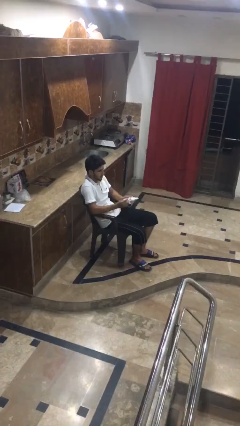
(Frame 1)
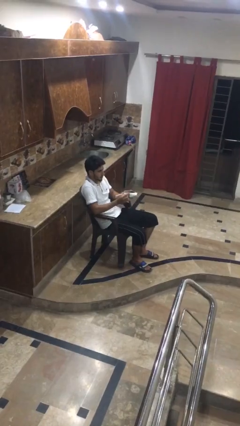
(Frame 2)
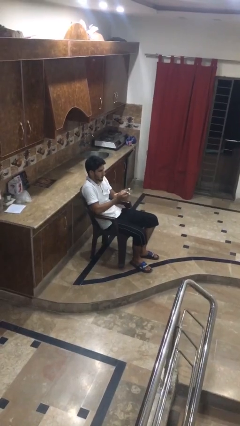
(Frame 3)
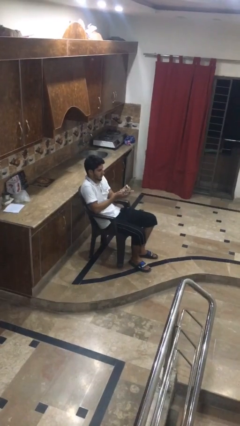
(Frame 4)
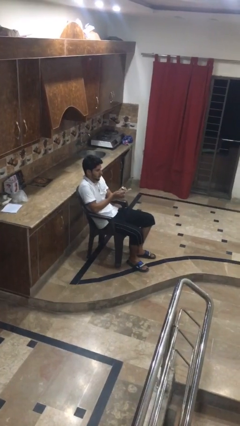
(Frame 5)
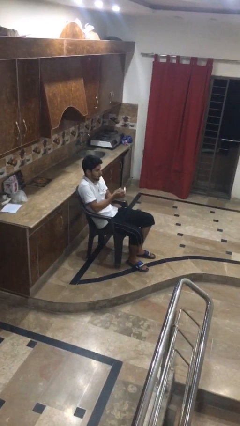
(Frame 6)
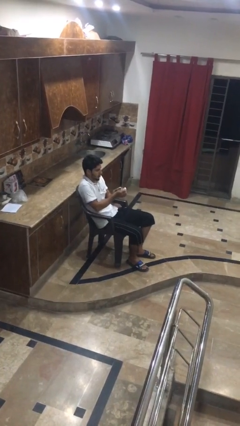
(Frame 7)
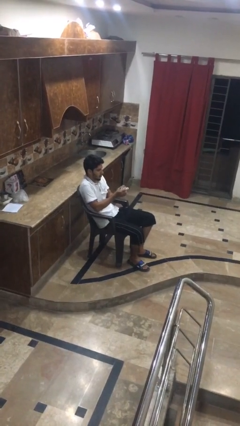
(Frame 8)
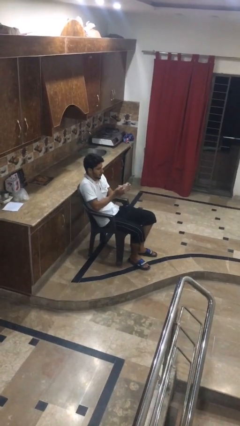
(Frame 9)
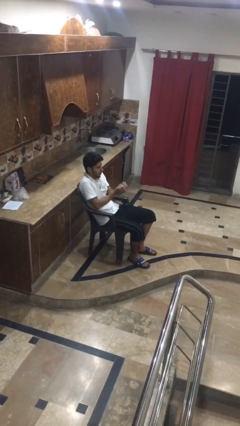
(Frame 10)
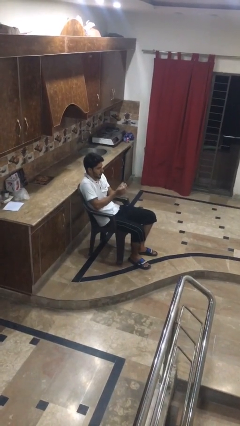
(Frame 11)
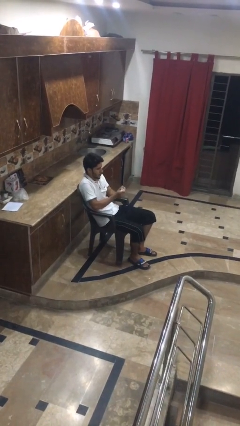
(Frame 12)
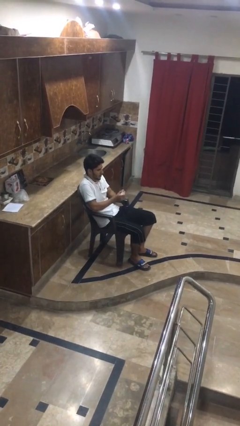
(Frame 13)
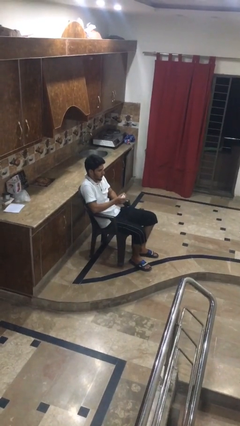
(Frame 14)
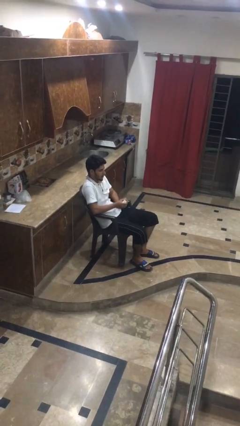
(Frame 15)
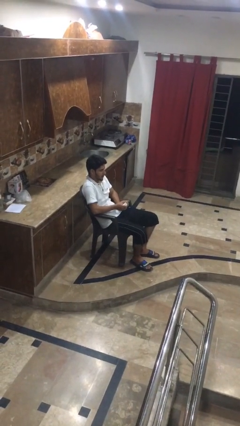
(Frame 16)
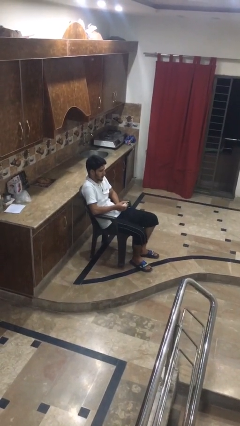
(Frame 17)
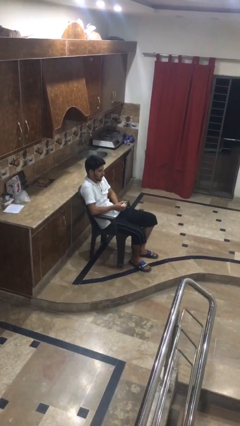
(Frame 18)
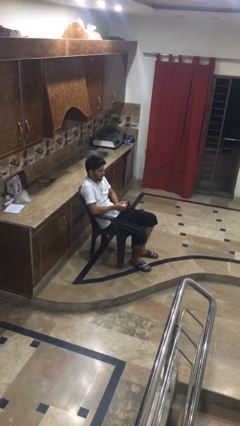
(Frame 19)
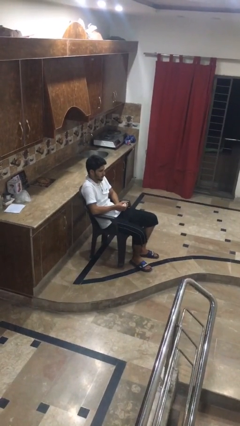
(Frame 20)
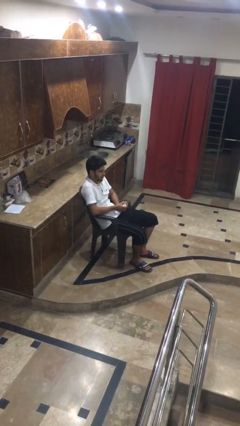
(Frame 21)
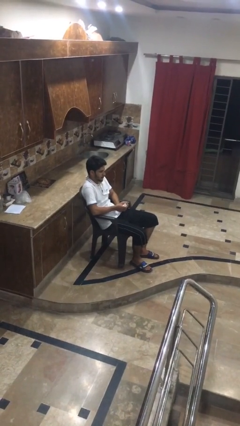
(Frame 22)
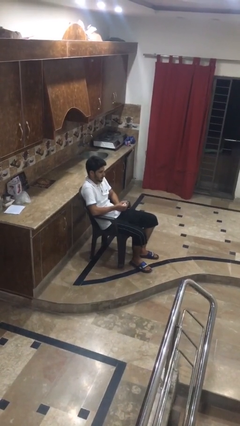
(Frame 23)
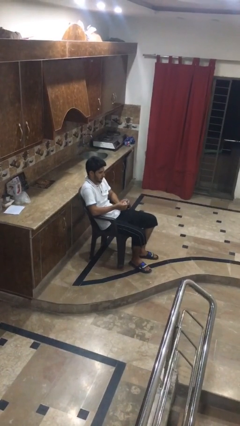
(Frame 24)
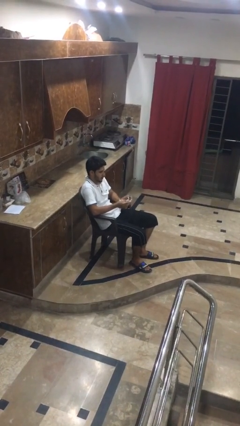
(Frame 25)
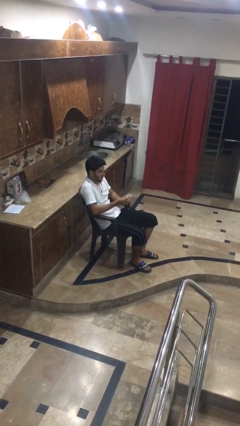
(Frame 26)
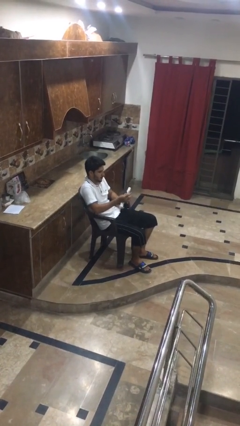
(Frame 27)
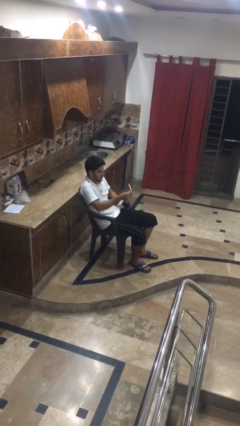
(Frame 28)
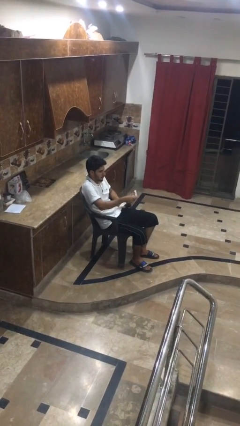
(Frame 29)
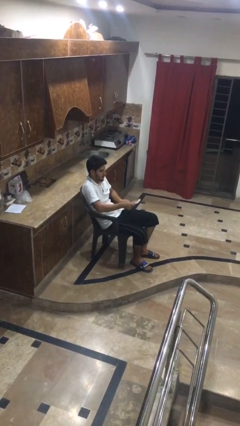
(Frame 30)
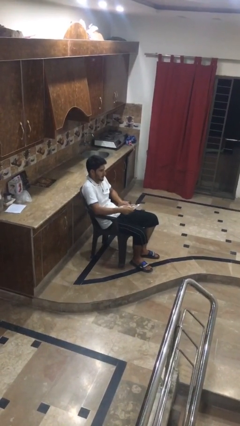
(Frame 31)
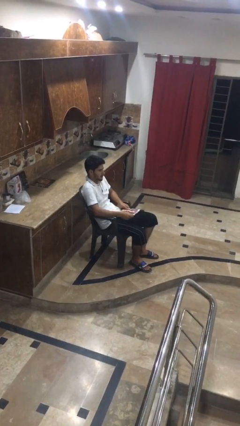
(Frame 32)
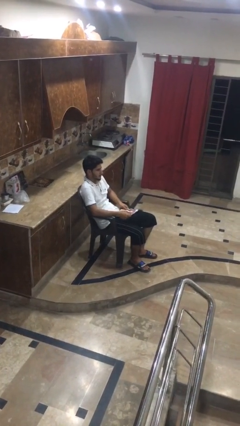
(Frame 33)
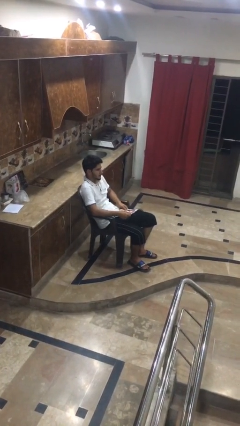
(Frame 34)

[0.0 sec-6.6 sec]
person crumples paper

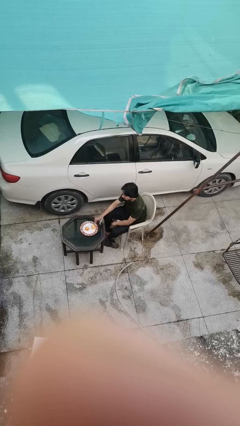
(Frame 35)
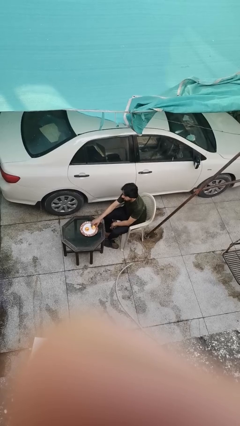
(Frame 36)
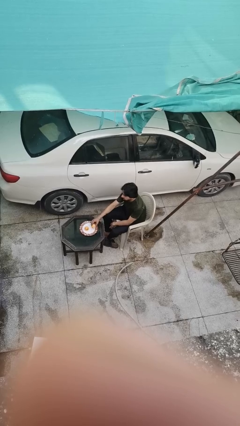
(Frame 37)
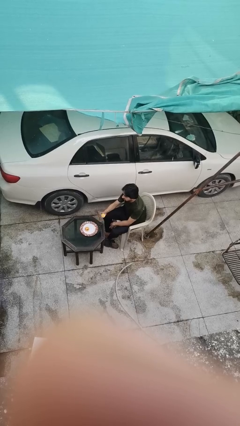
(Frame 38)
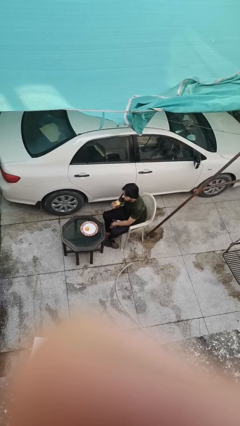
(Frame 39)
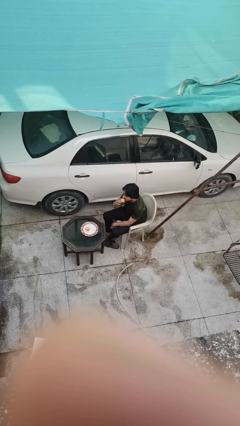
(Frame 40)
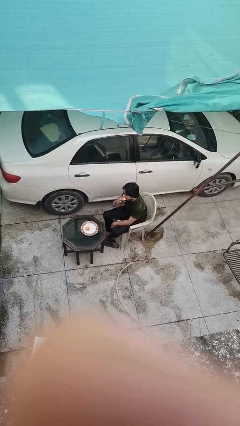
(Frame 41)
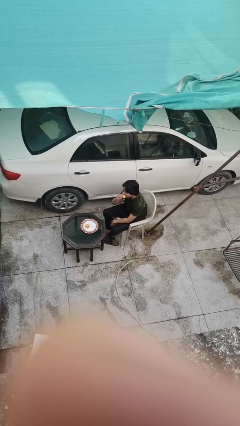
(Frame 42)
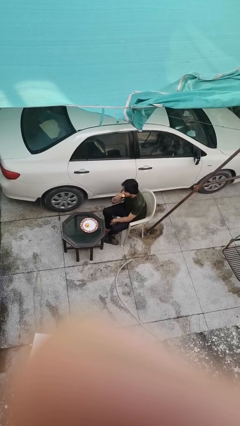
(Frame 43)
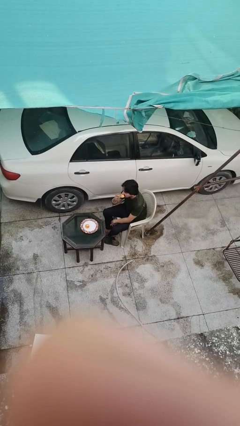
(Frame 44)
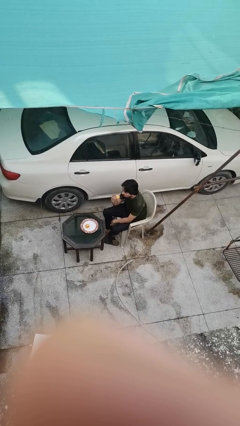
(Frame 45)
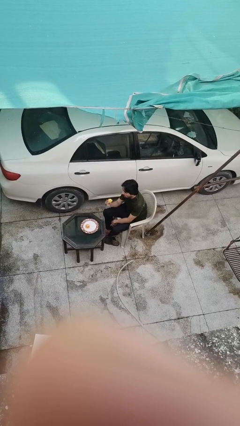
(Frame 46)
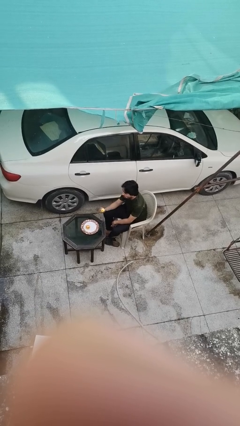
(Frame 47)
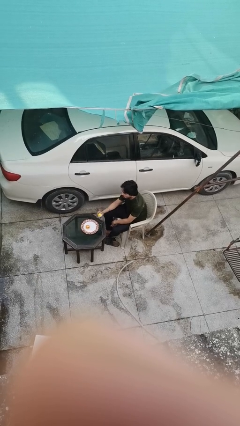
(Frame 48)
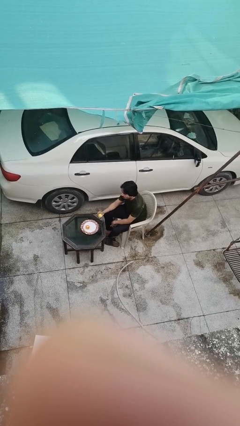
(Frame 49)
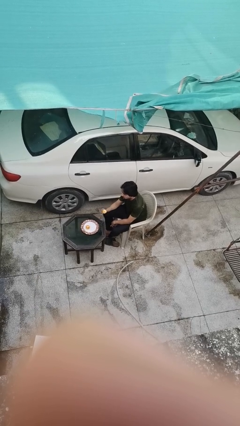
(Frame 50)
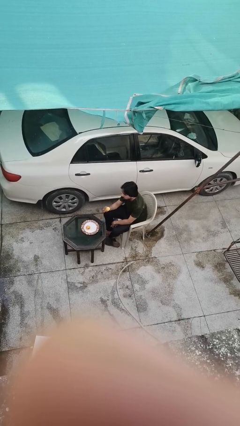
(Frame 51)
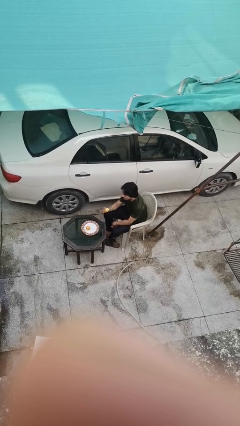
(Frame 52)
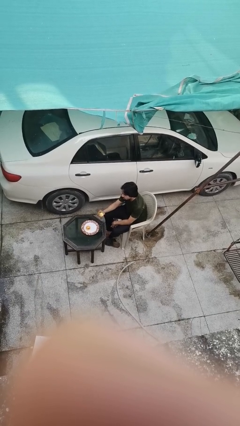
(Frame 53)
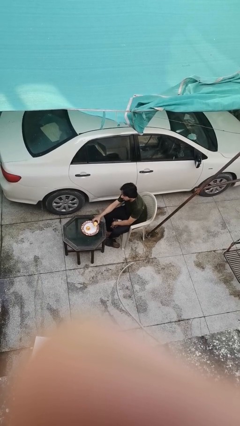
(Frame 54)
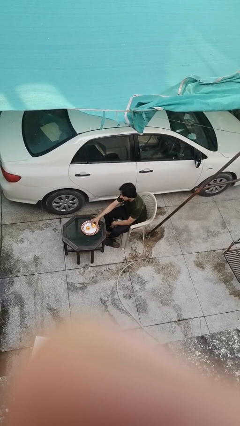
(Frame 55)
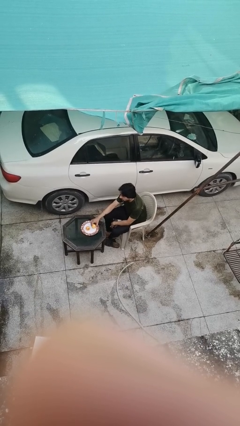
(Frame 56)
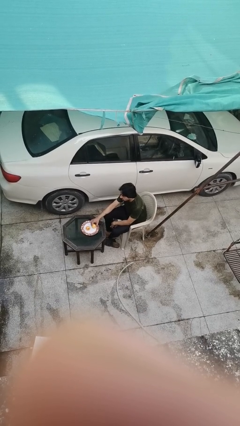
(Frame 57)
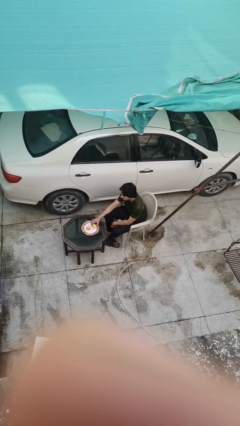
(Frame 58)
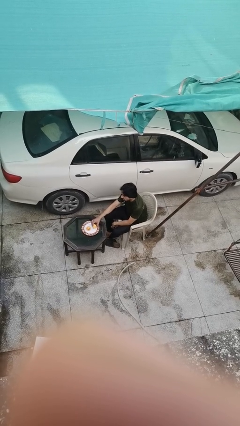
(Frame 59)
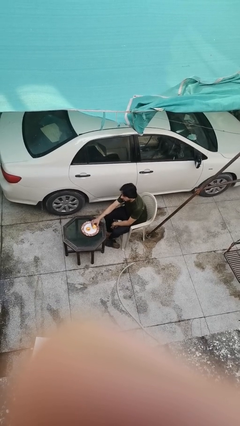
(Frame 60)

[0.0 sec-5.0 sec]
person eats with hands

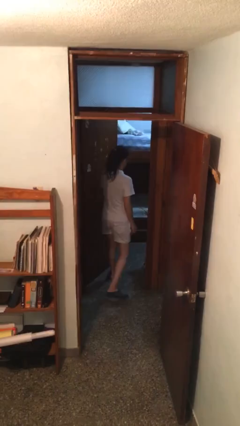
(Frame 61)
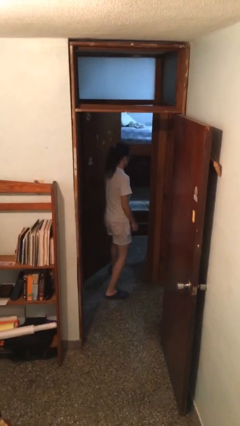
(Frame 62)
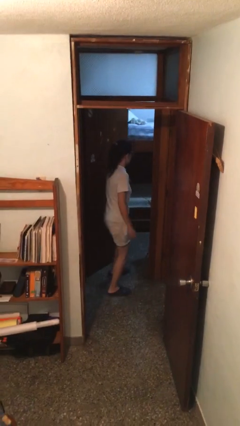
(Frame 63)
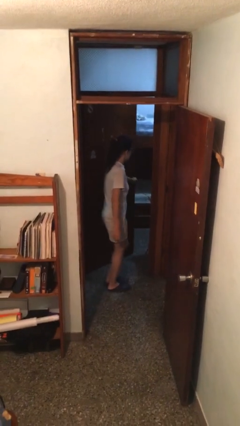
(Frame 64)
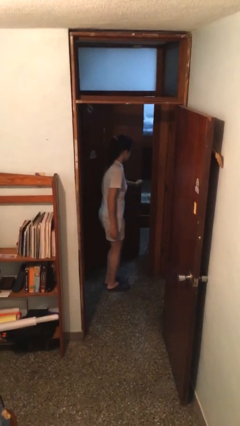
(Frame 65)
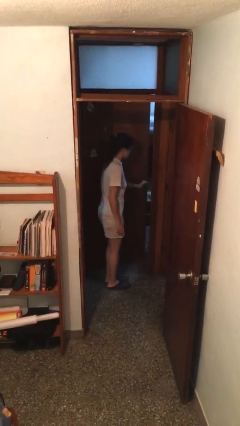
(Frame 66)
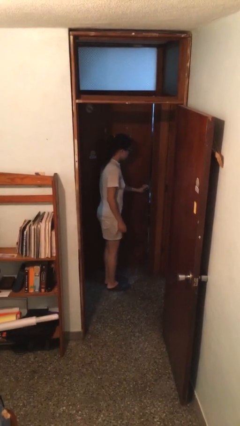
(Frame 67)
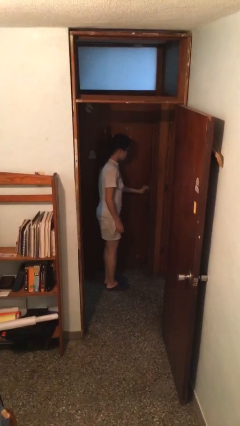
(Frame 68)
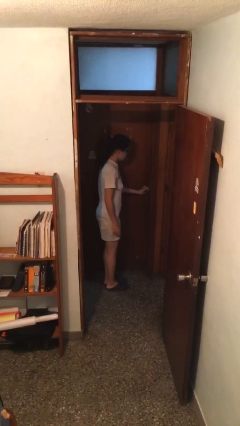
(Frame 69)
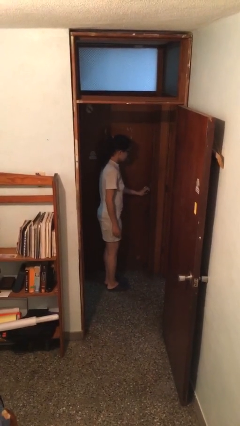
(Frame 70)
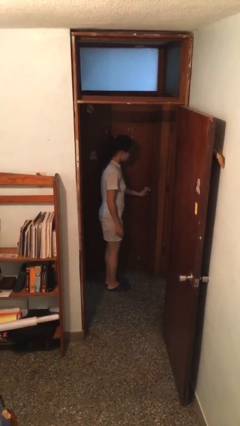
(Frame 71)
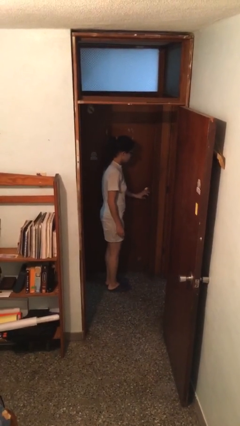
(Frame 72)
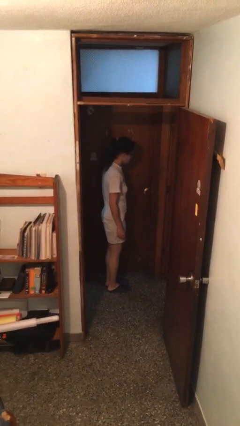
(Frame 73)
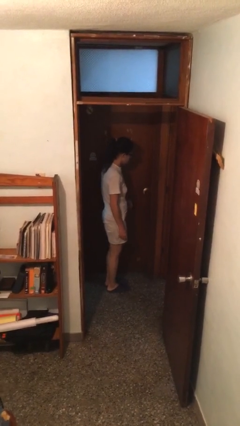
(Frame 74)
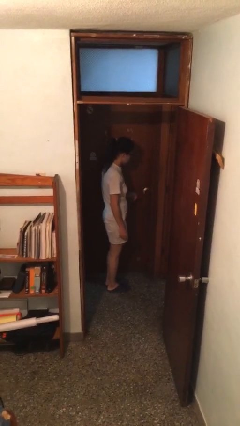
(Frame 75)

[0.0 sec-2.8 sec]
person closes facility door

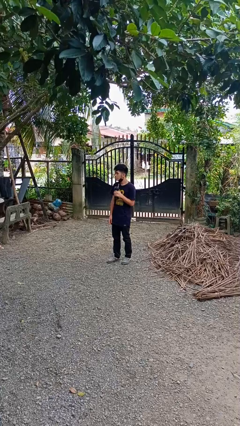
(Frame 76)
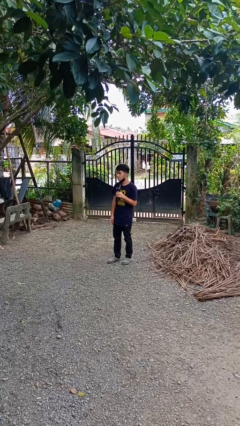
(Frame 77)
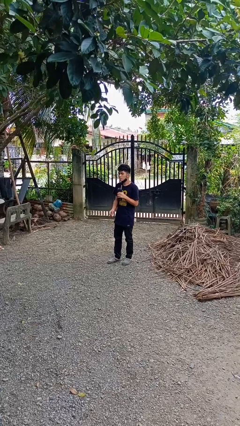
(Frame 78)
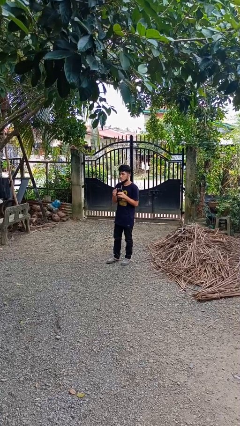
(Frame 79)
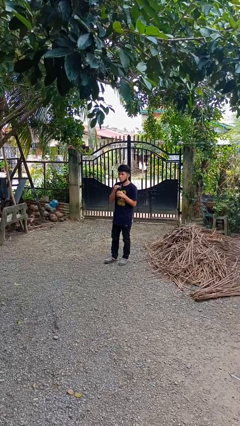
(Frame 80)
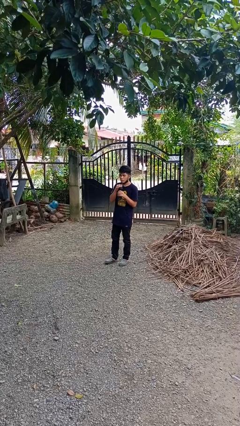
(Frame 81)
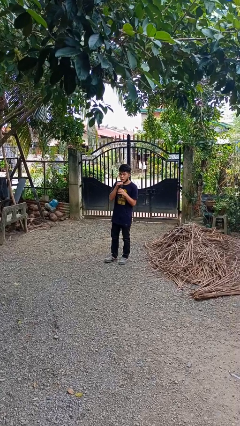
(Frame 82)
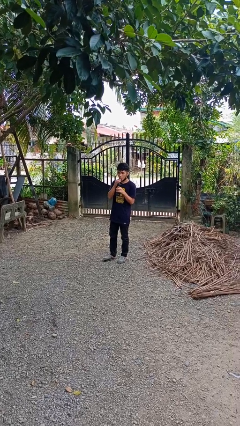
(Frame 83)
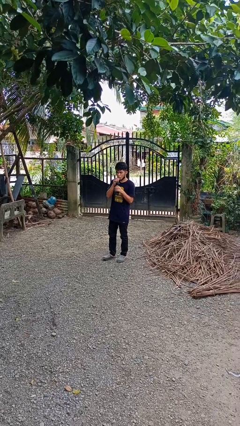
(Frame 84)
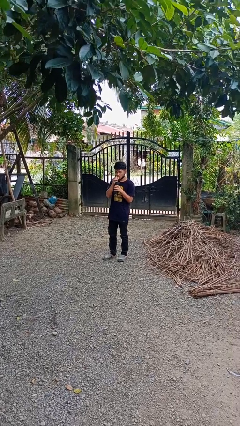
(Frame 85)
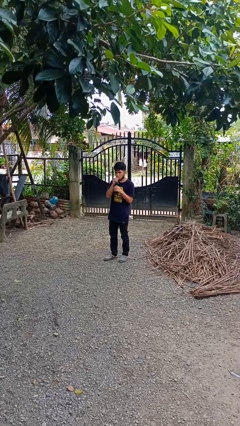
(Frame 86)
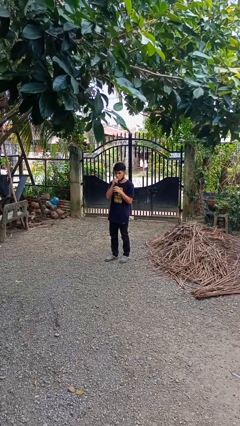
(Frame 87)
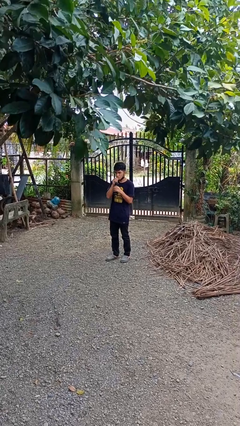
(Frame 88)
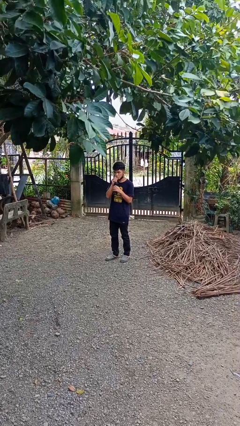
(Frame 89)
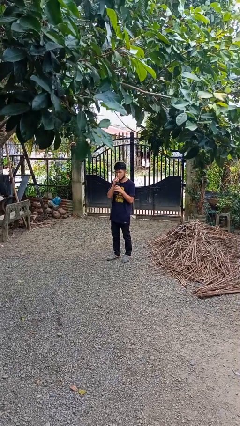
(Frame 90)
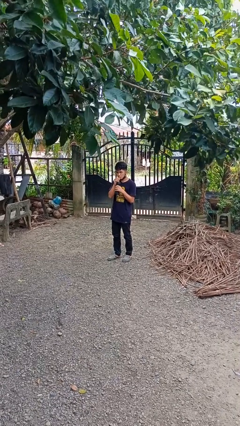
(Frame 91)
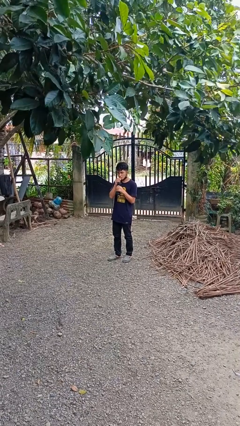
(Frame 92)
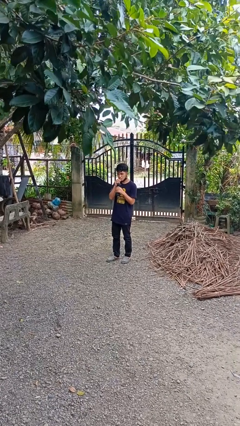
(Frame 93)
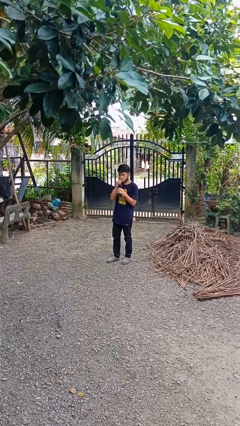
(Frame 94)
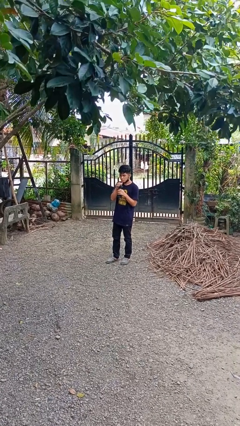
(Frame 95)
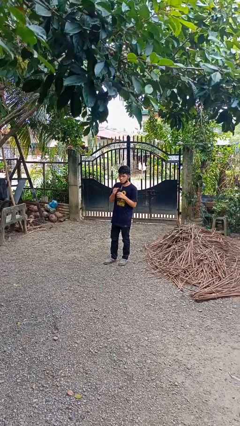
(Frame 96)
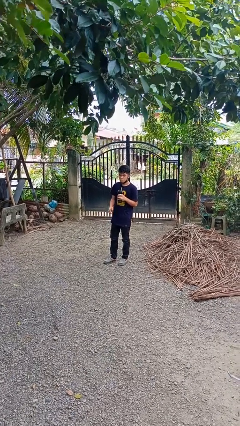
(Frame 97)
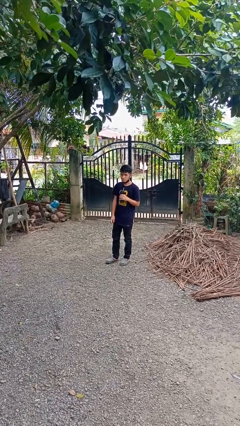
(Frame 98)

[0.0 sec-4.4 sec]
person drinks from straw
